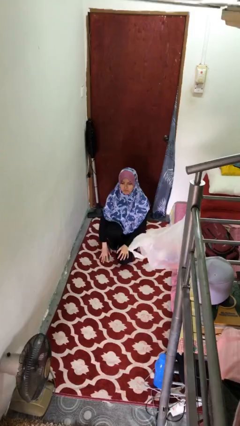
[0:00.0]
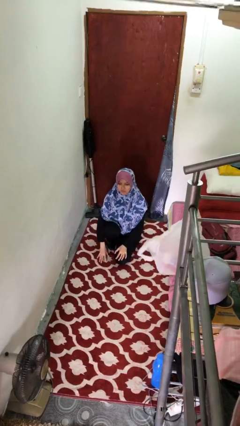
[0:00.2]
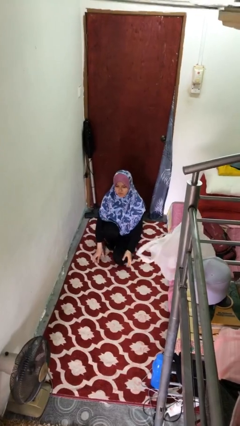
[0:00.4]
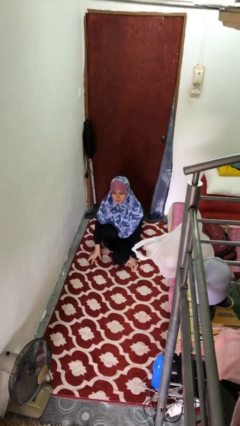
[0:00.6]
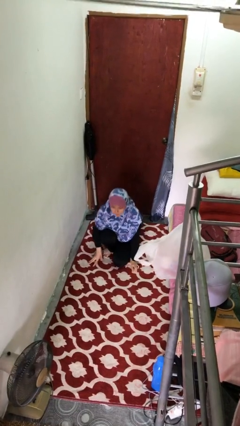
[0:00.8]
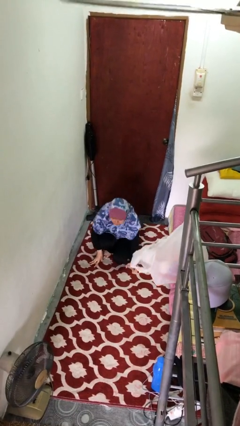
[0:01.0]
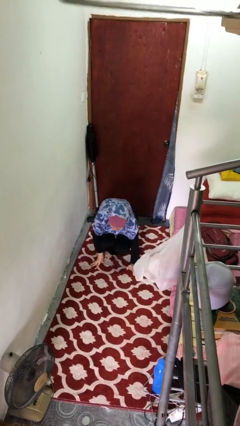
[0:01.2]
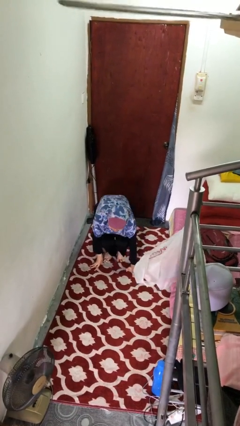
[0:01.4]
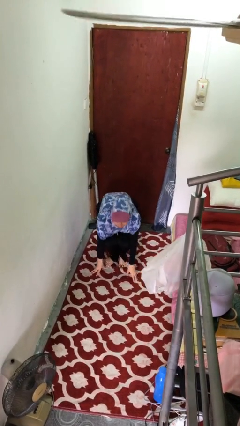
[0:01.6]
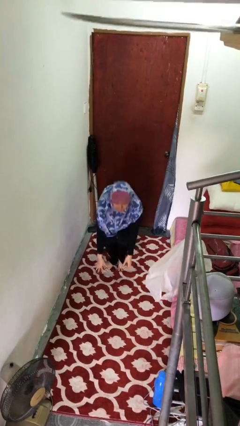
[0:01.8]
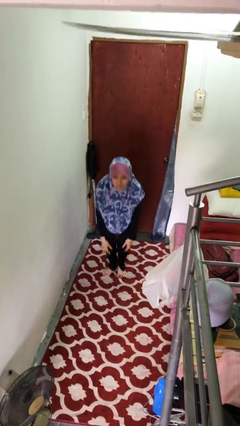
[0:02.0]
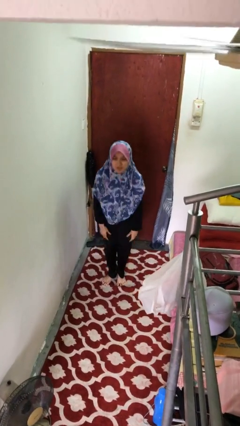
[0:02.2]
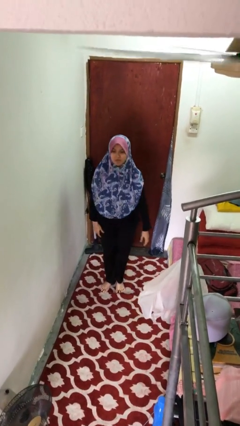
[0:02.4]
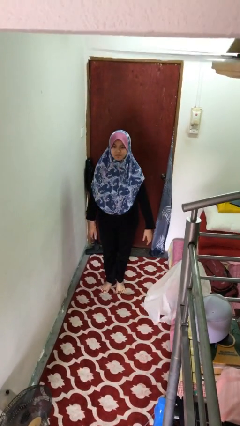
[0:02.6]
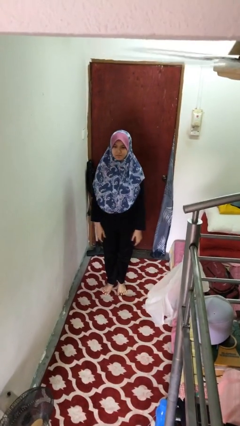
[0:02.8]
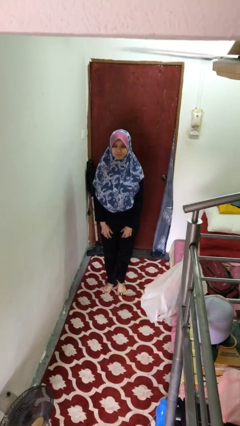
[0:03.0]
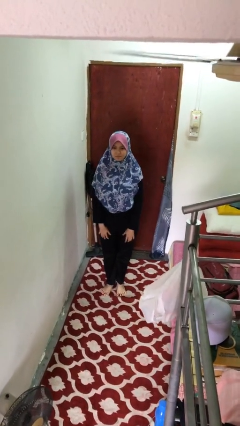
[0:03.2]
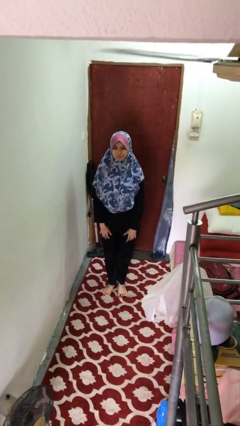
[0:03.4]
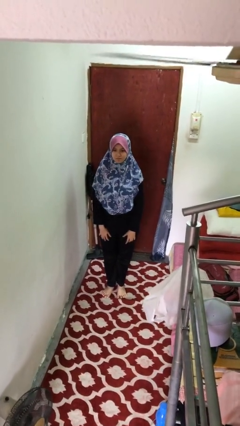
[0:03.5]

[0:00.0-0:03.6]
person stands up from floor

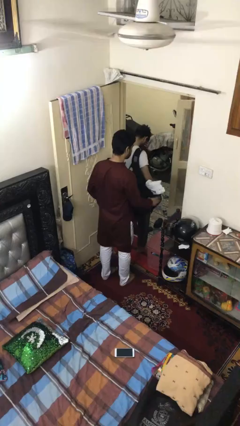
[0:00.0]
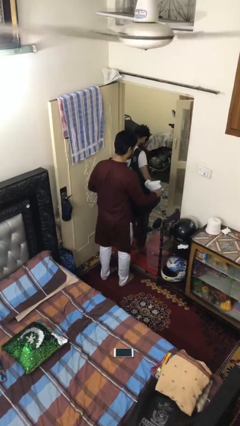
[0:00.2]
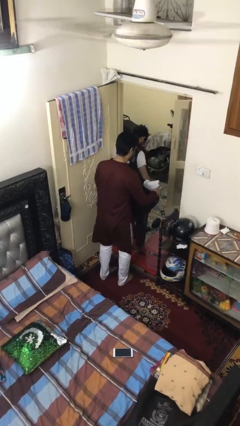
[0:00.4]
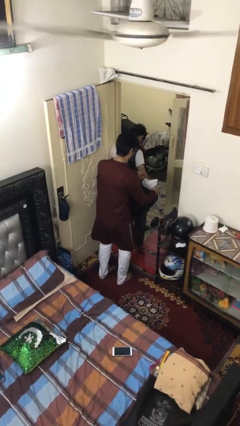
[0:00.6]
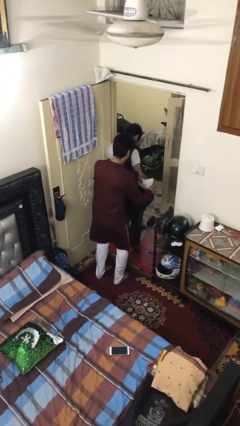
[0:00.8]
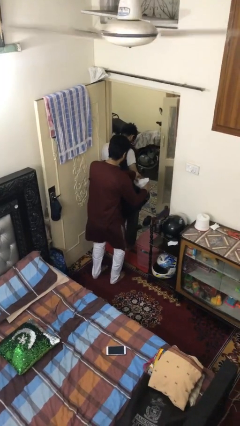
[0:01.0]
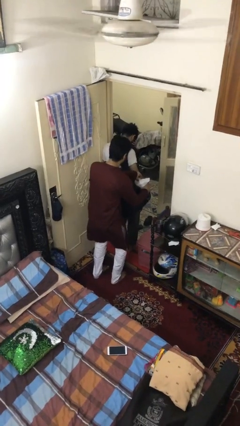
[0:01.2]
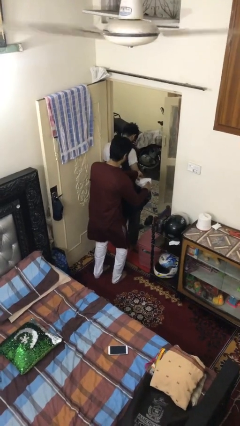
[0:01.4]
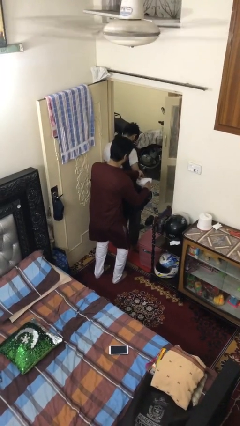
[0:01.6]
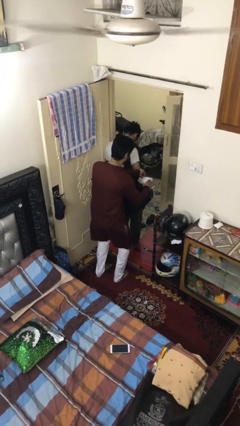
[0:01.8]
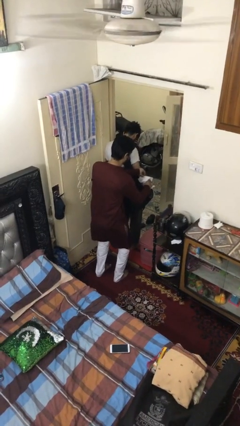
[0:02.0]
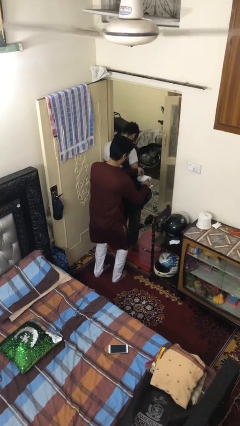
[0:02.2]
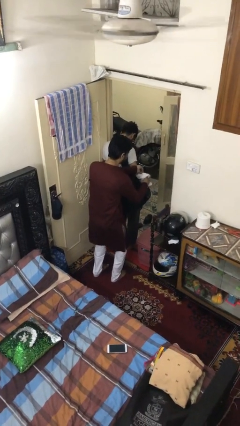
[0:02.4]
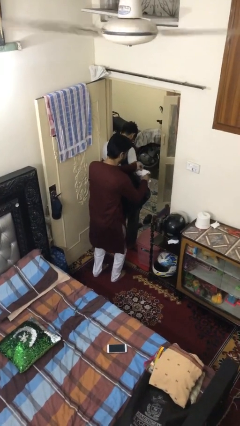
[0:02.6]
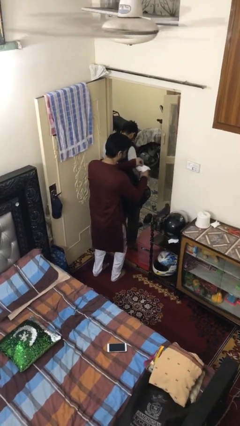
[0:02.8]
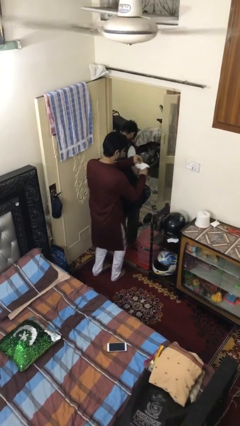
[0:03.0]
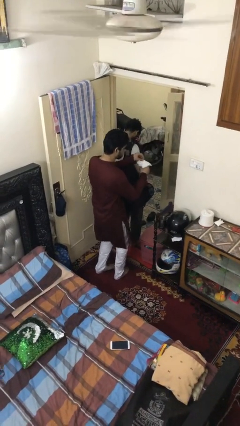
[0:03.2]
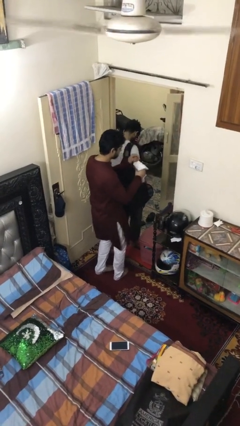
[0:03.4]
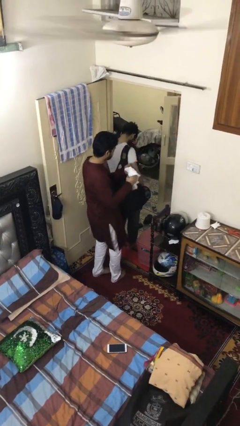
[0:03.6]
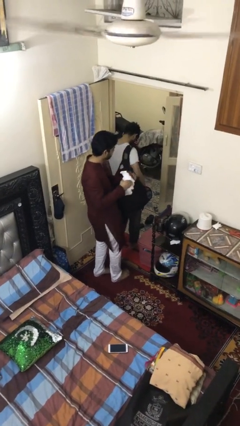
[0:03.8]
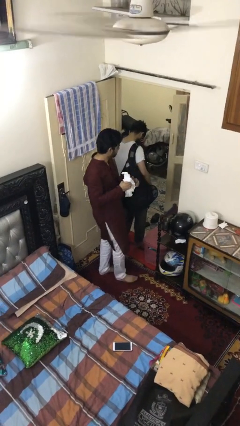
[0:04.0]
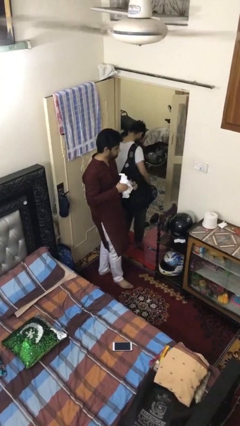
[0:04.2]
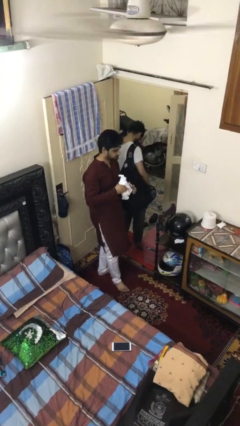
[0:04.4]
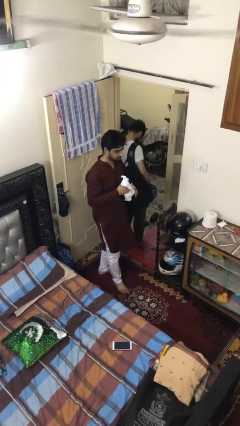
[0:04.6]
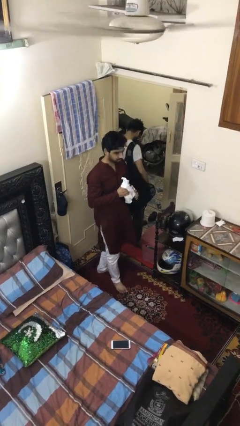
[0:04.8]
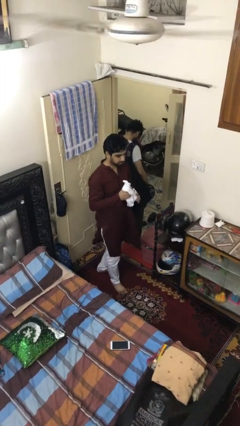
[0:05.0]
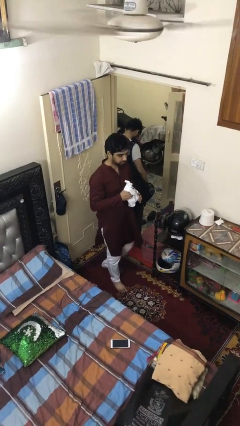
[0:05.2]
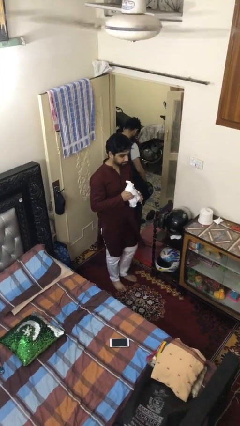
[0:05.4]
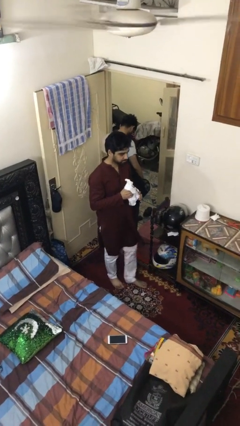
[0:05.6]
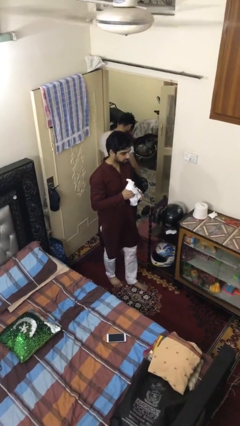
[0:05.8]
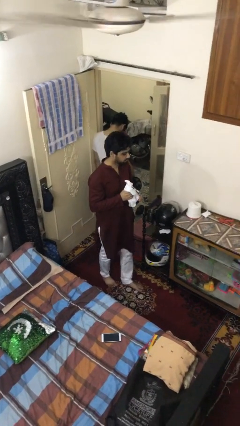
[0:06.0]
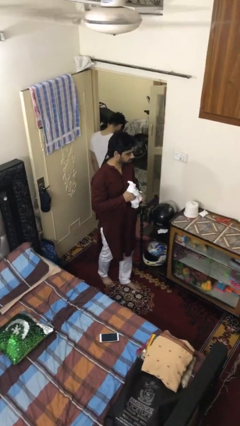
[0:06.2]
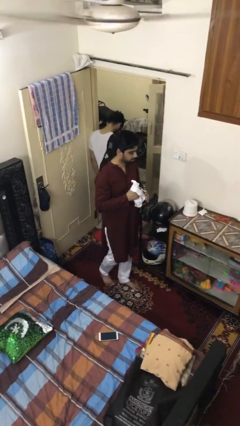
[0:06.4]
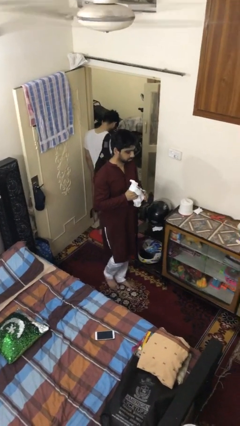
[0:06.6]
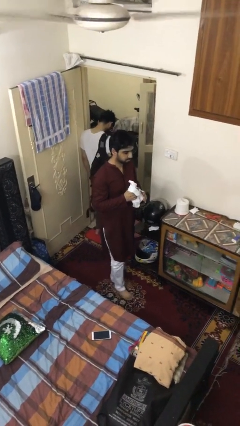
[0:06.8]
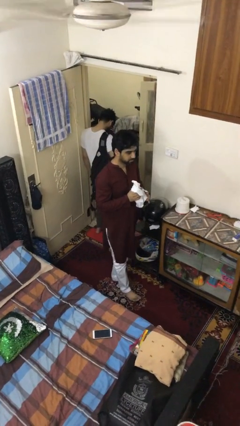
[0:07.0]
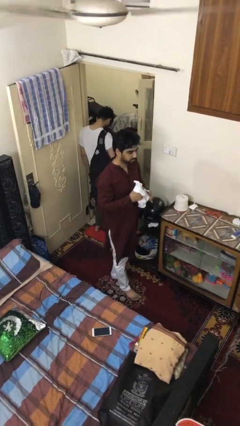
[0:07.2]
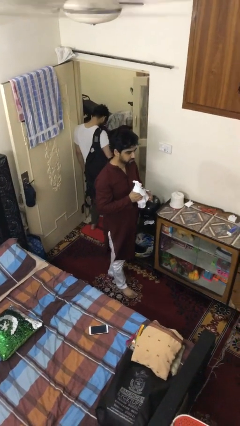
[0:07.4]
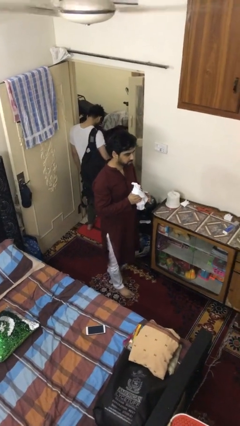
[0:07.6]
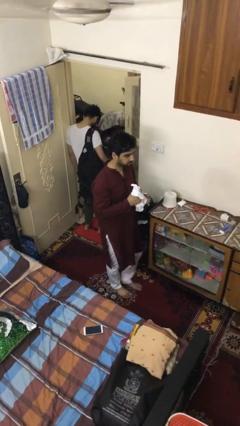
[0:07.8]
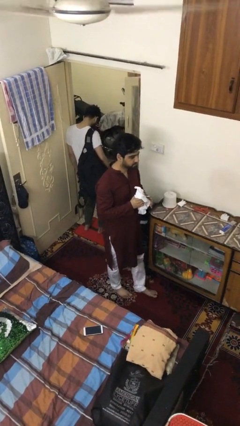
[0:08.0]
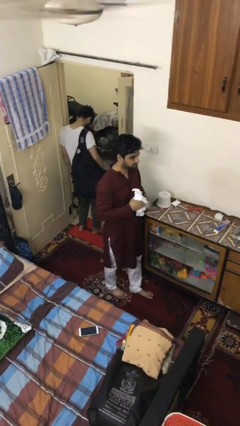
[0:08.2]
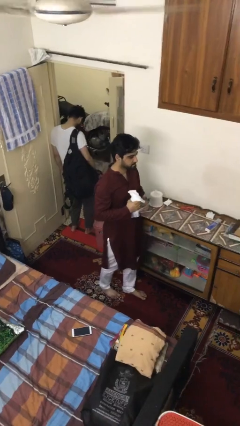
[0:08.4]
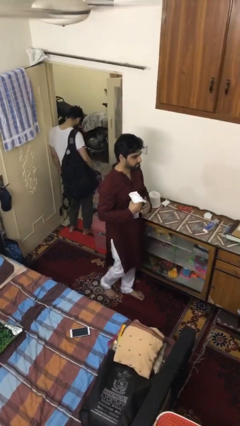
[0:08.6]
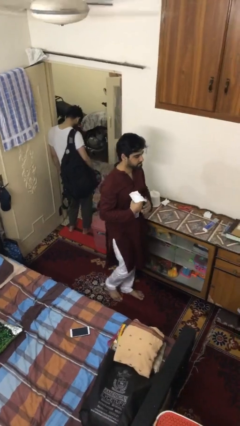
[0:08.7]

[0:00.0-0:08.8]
person steals object from person

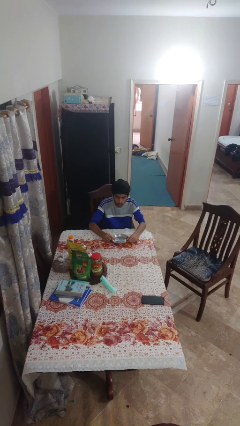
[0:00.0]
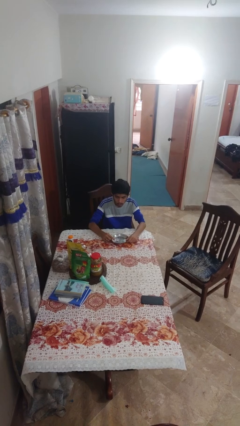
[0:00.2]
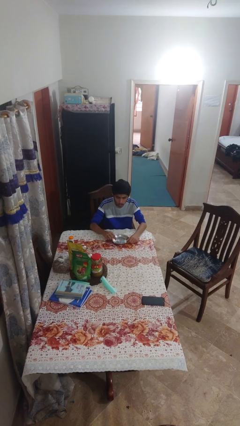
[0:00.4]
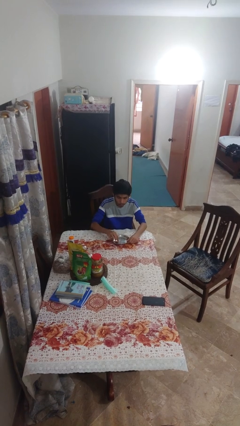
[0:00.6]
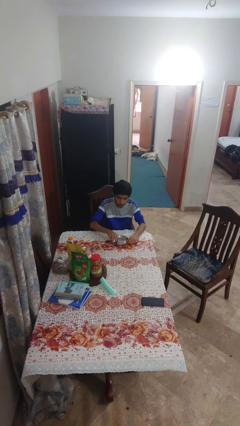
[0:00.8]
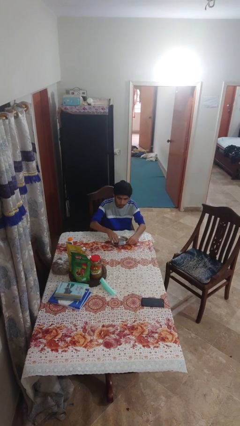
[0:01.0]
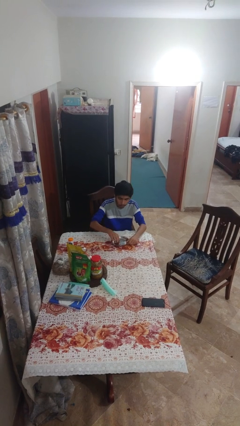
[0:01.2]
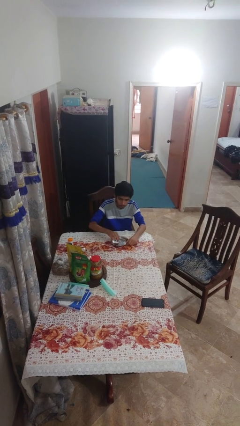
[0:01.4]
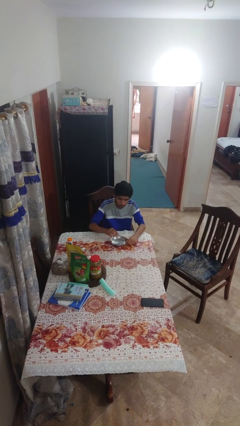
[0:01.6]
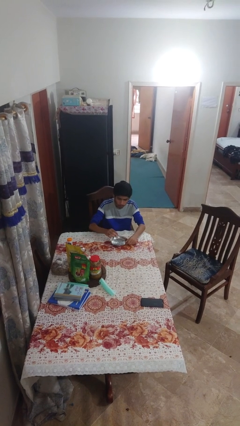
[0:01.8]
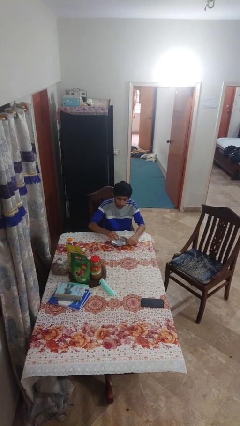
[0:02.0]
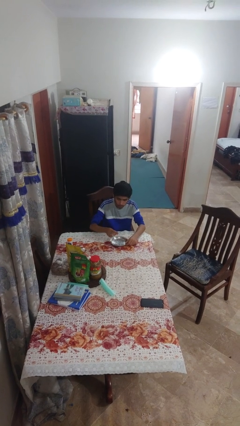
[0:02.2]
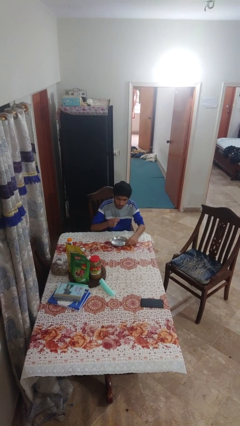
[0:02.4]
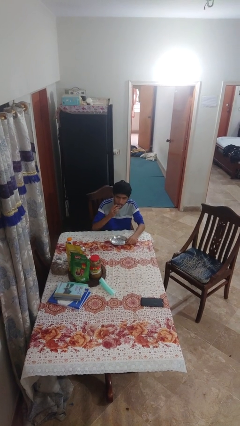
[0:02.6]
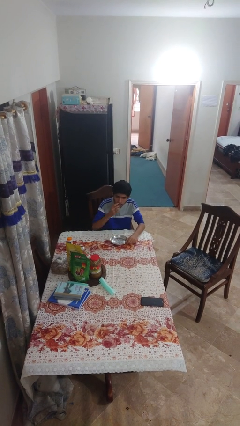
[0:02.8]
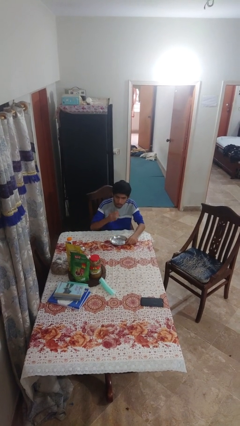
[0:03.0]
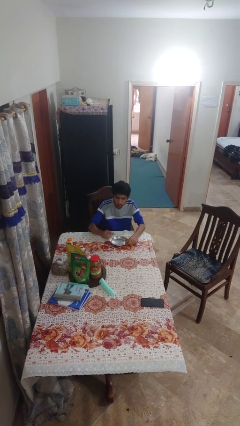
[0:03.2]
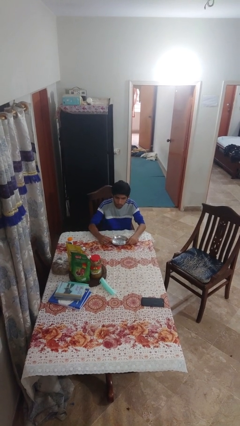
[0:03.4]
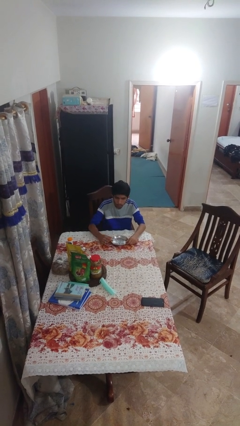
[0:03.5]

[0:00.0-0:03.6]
person eats with hands

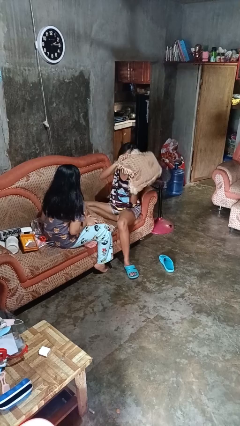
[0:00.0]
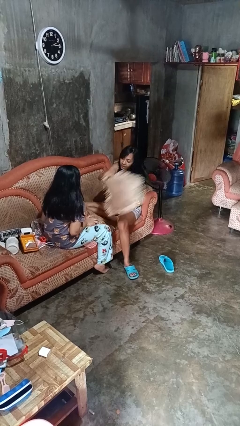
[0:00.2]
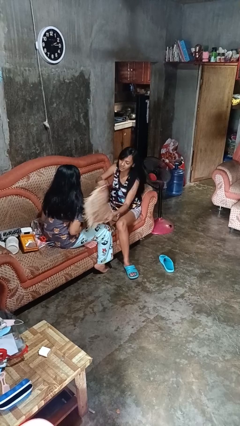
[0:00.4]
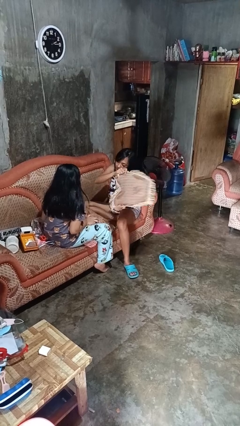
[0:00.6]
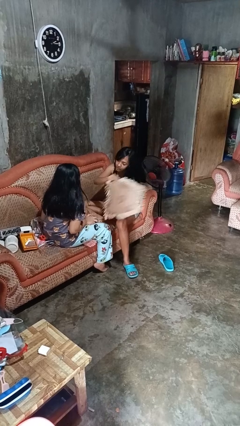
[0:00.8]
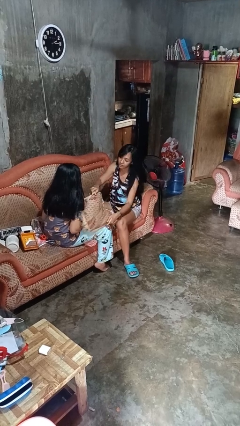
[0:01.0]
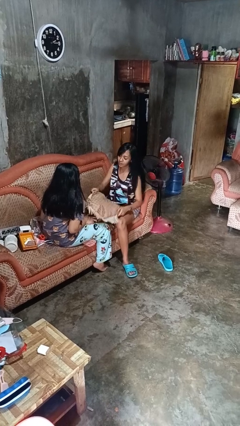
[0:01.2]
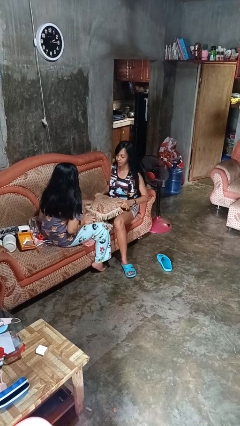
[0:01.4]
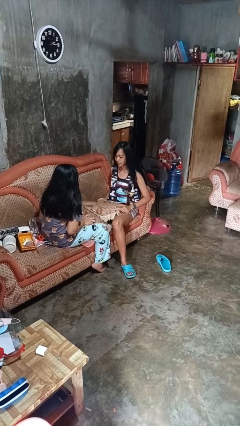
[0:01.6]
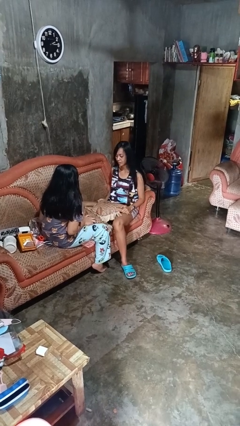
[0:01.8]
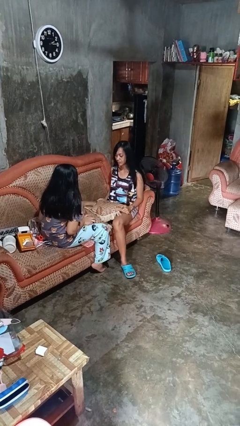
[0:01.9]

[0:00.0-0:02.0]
person hits person with pillow
